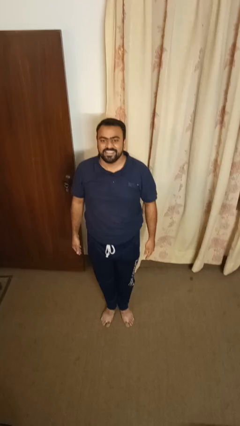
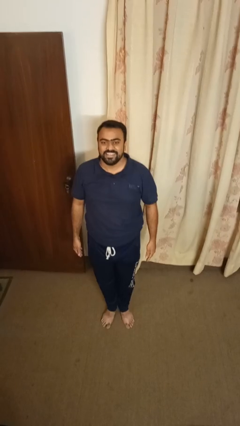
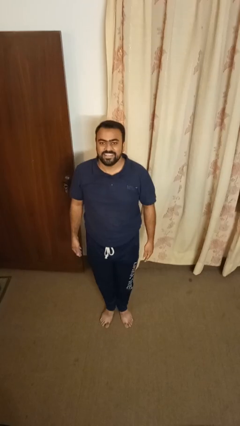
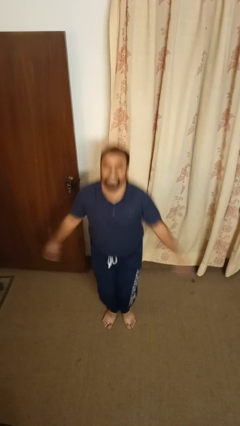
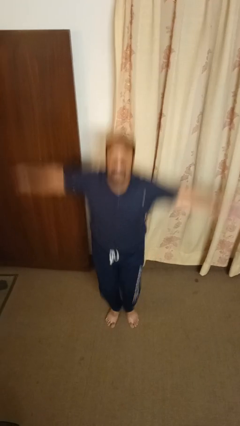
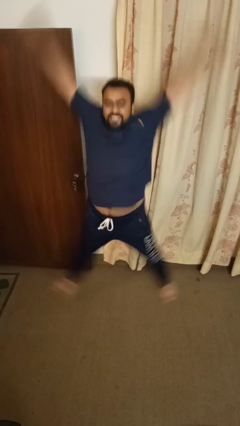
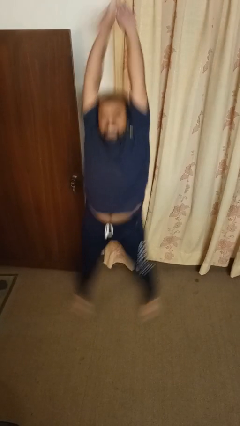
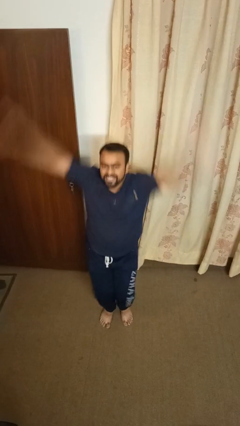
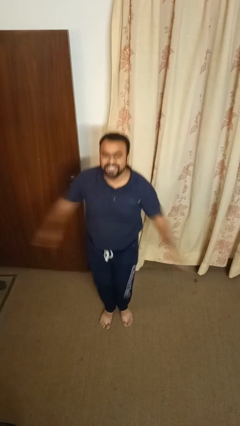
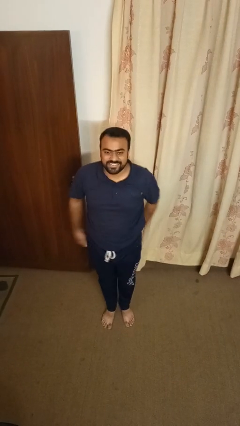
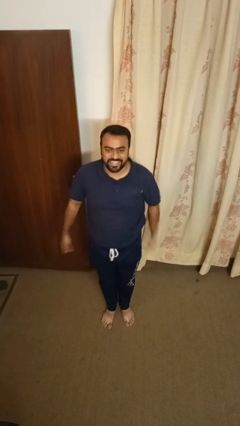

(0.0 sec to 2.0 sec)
person exercises with jumping jacks

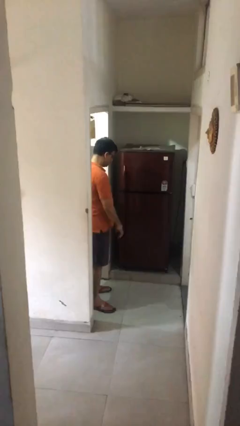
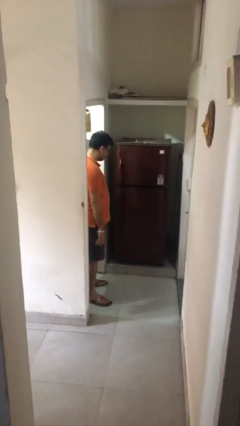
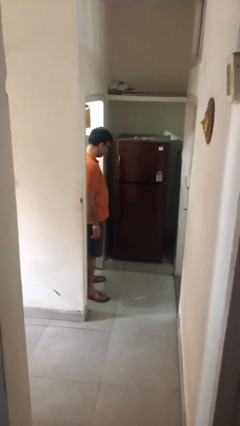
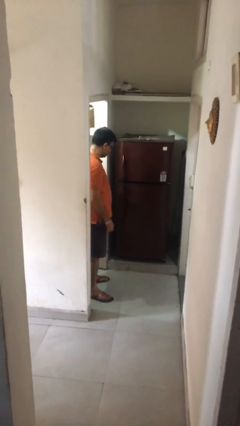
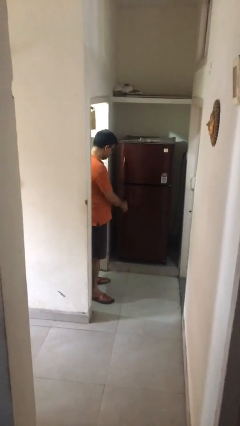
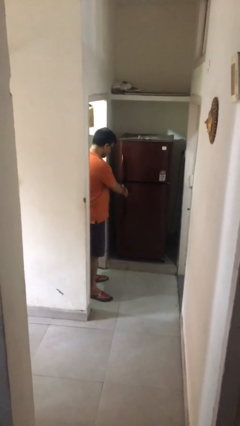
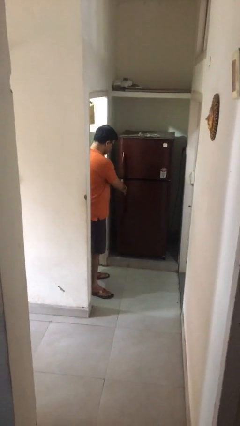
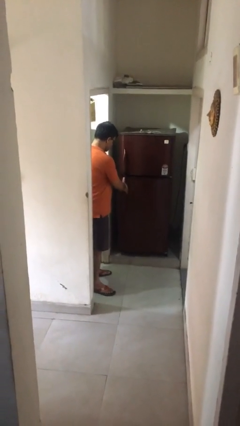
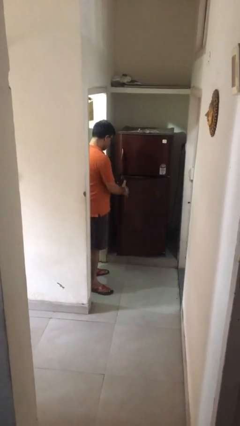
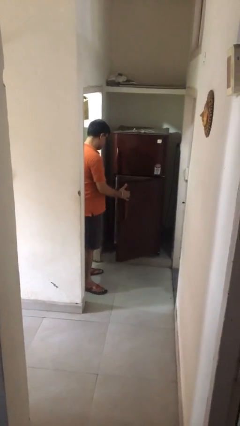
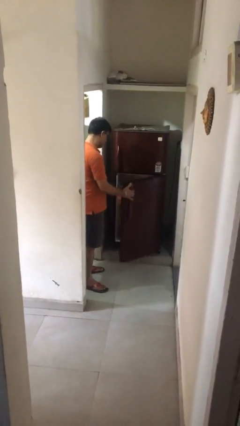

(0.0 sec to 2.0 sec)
person opens refrigerator

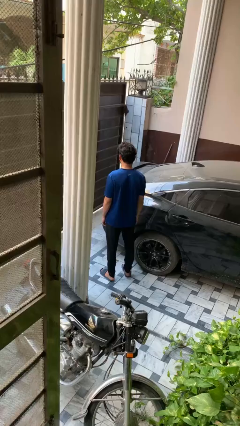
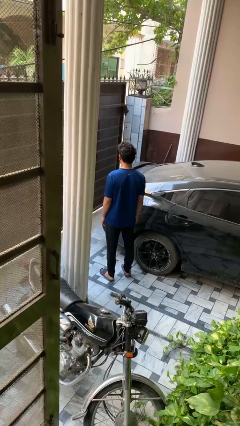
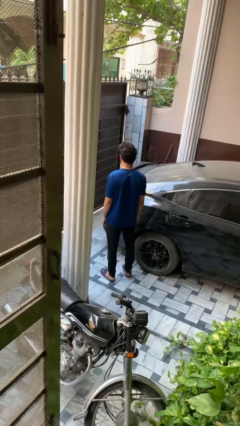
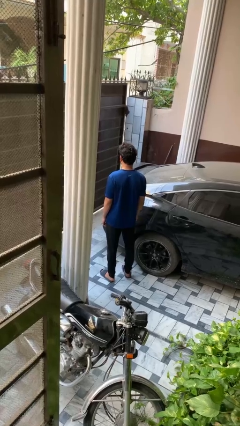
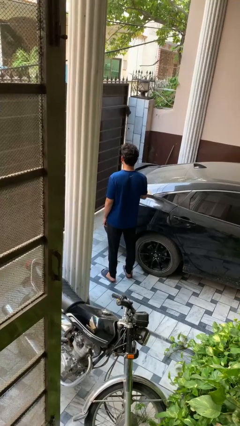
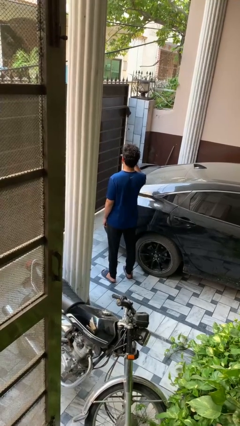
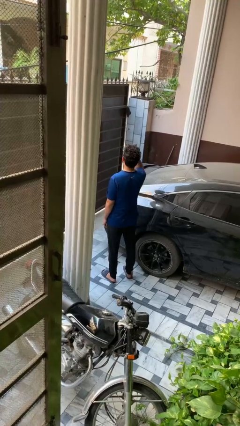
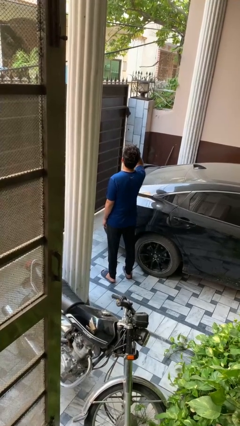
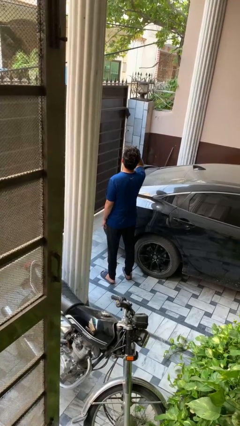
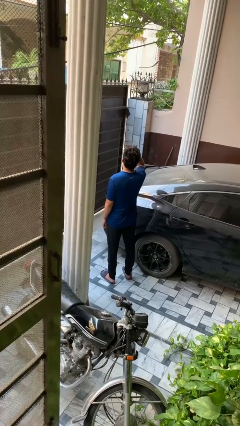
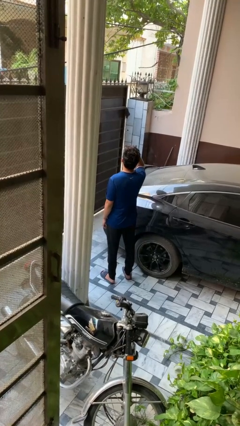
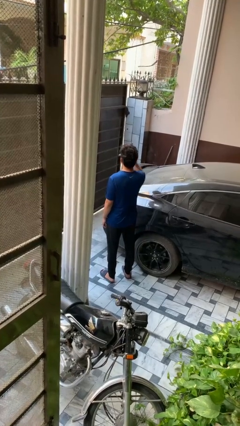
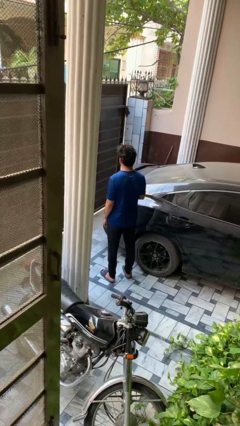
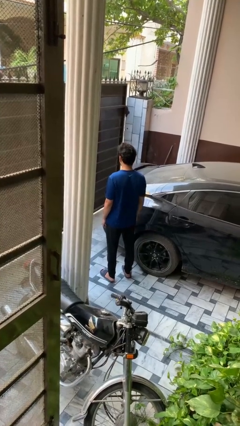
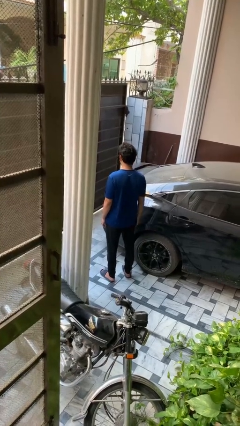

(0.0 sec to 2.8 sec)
person shades eyes

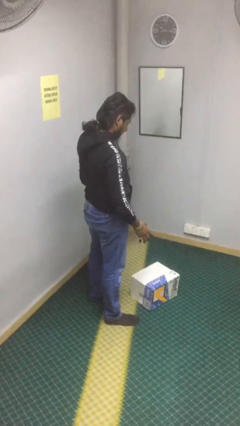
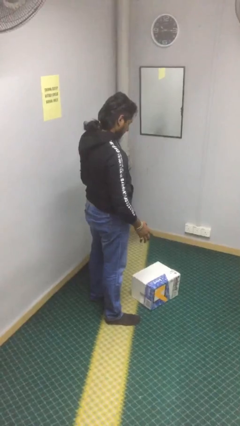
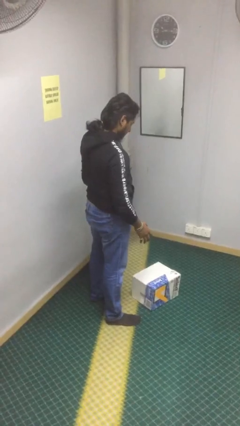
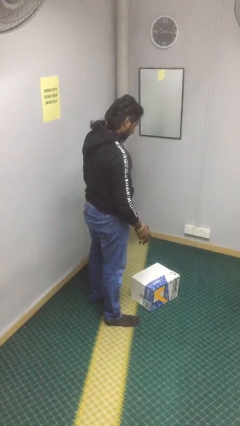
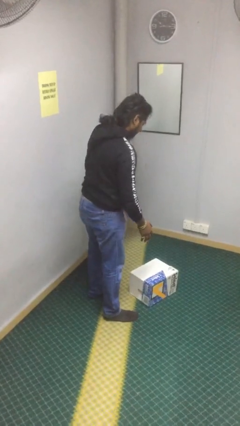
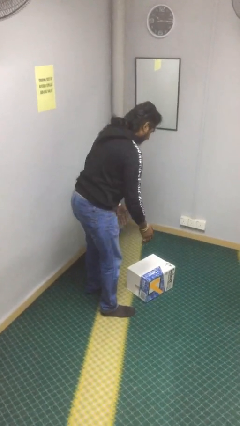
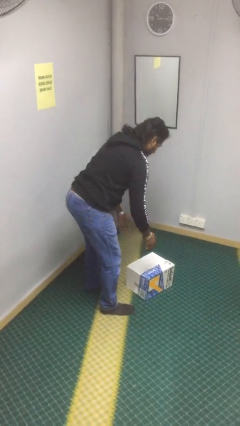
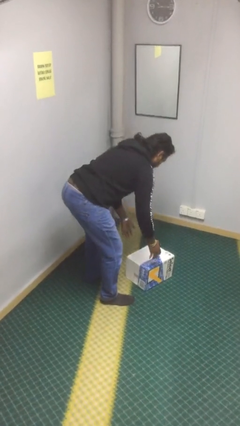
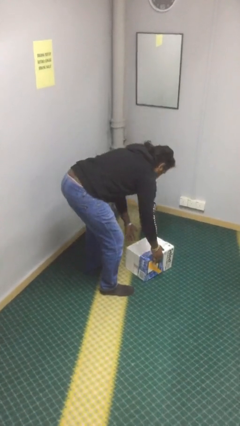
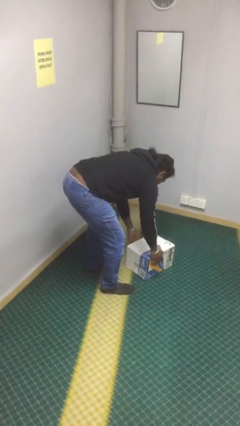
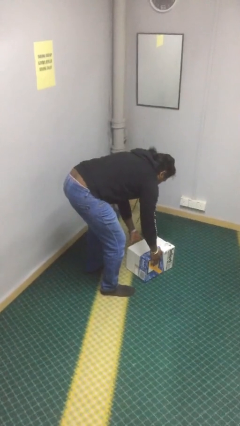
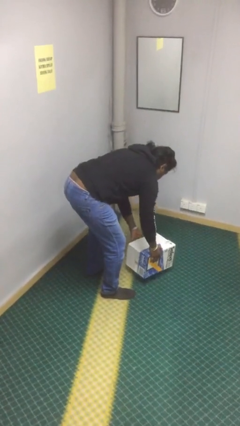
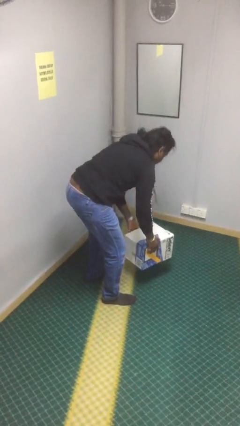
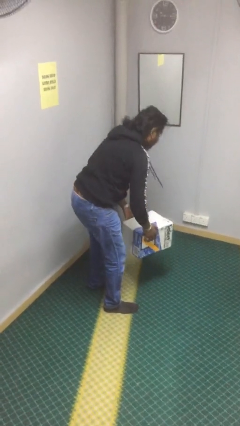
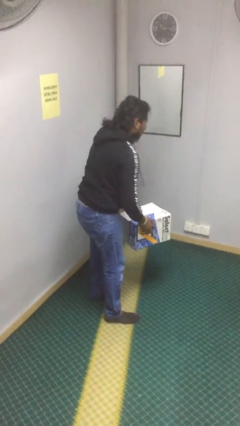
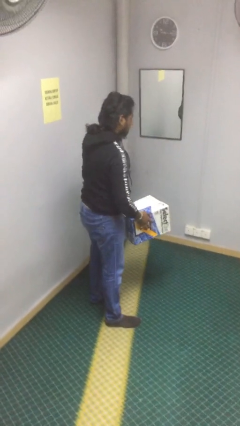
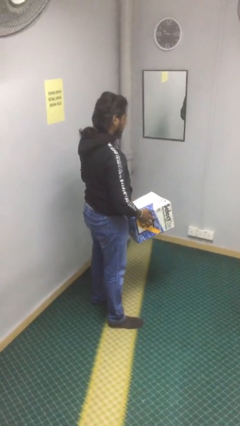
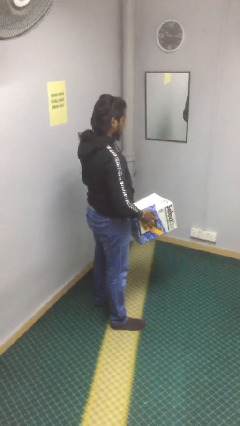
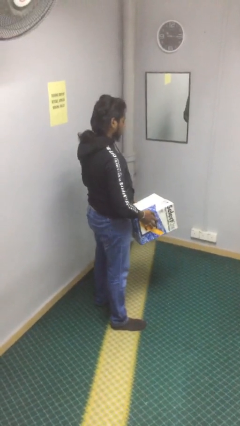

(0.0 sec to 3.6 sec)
person picks up object from floor

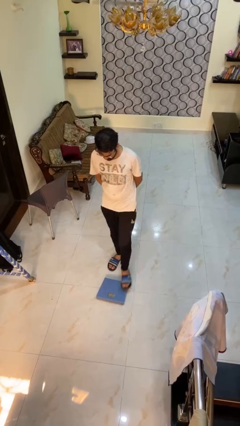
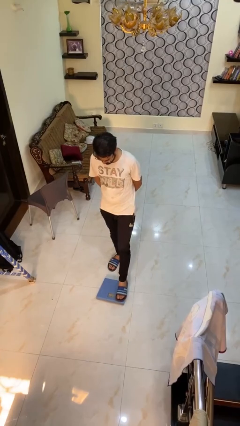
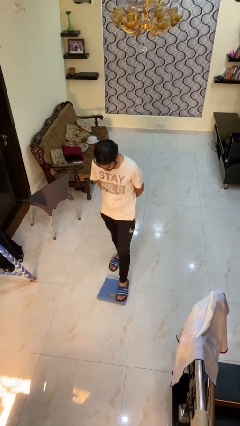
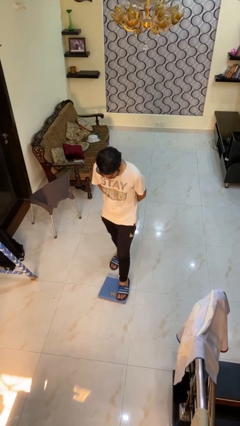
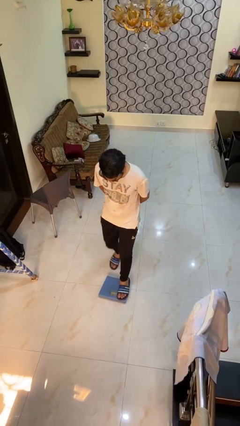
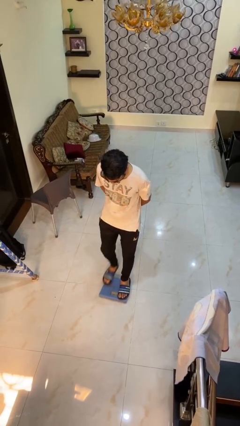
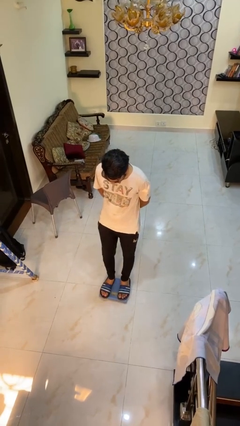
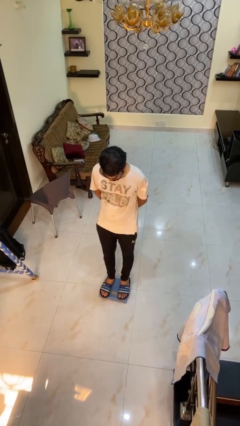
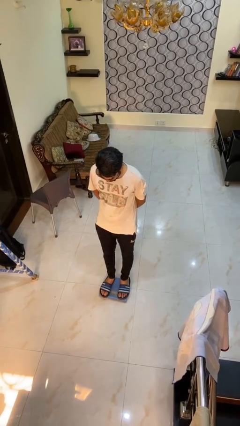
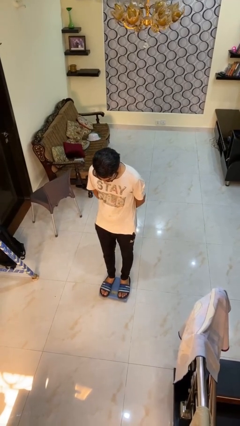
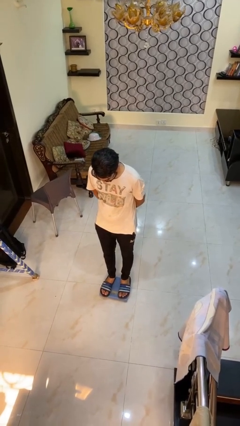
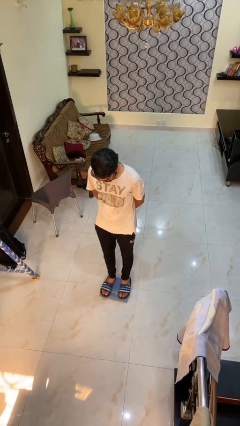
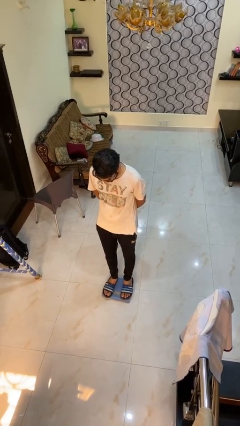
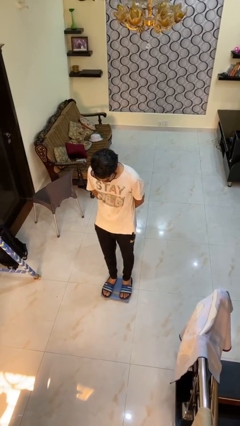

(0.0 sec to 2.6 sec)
person uses bodyweight scale

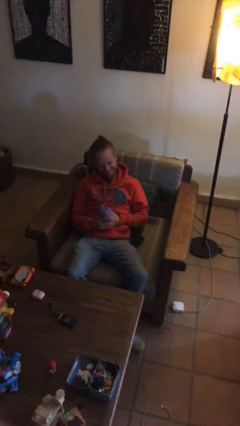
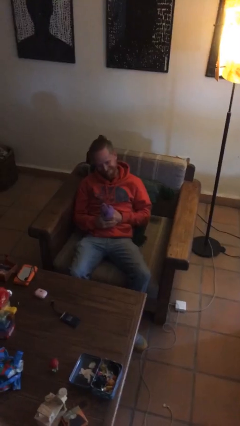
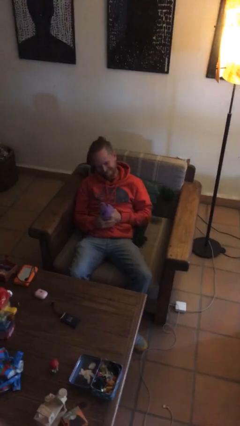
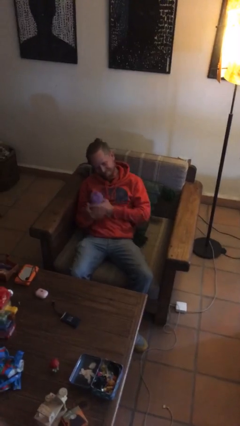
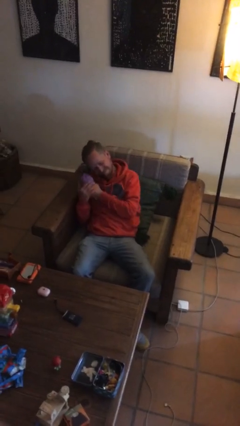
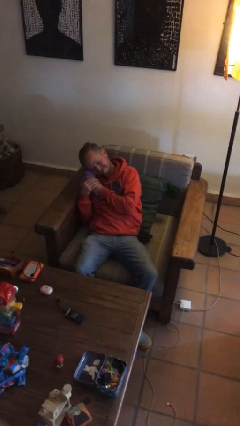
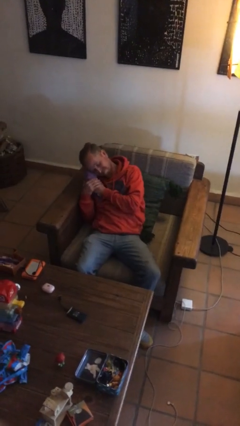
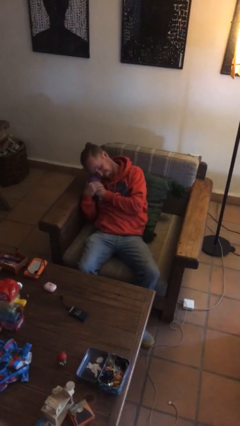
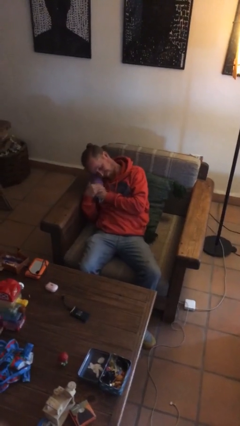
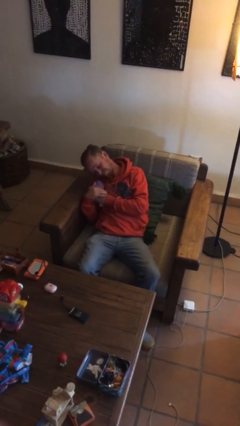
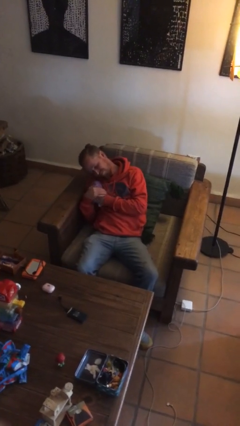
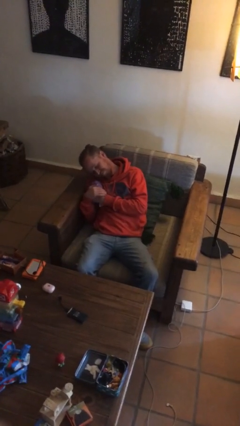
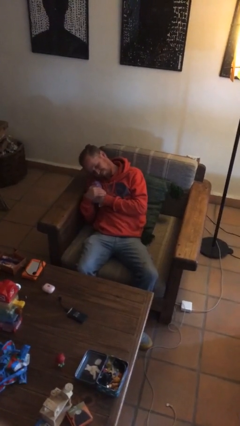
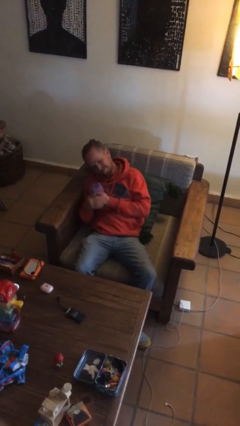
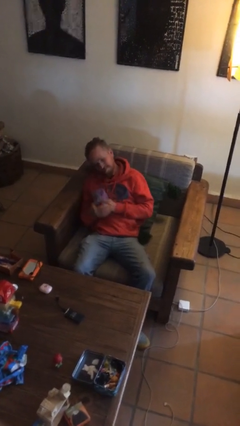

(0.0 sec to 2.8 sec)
person hugs stuffed animal

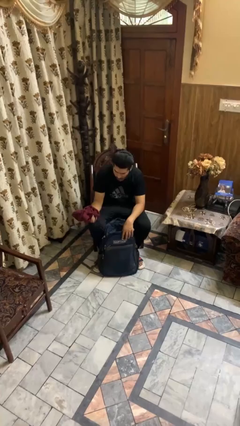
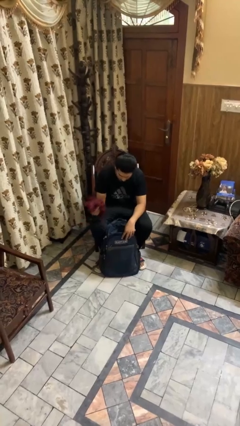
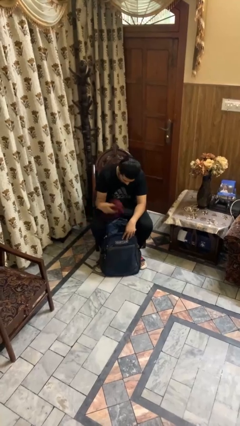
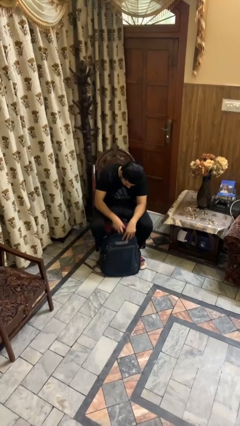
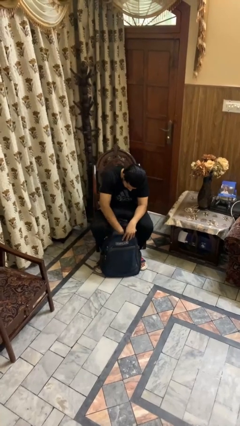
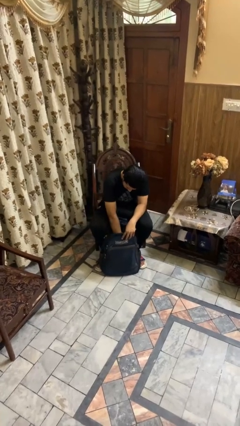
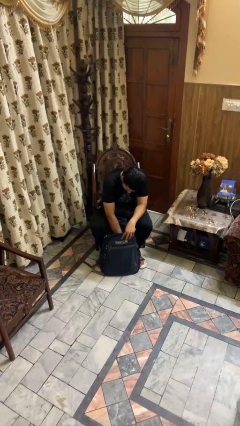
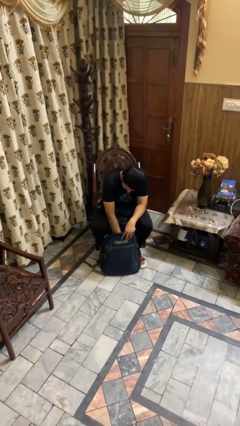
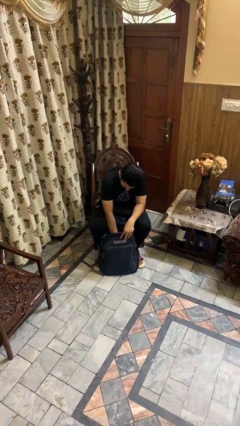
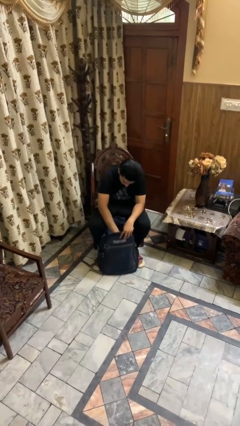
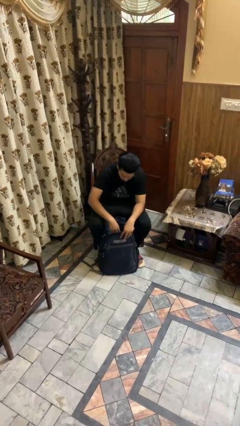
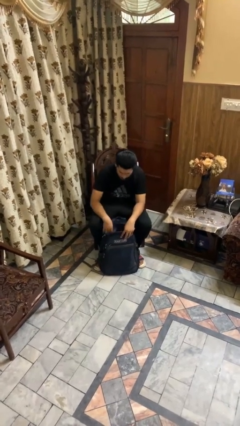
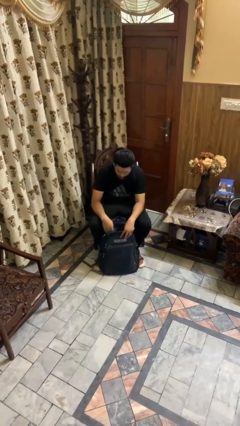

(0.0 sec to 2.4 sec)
person puts object into backpack
